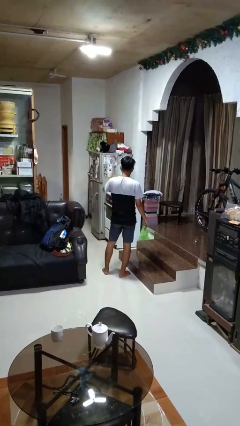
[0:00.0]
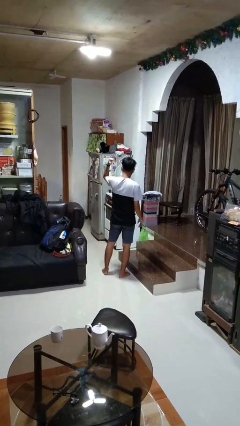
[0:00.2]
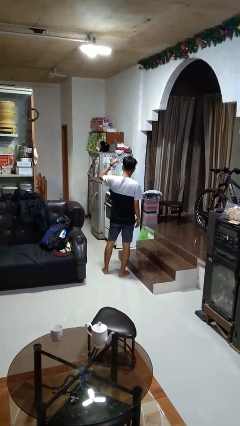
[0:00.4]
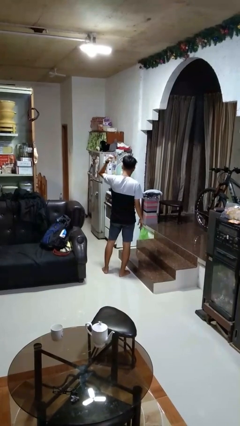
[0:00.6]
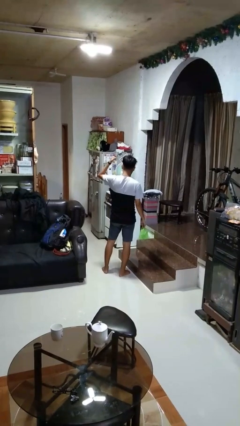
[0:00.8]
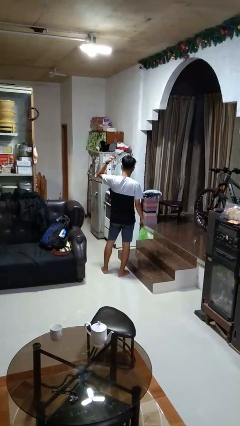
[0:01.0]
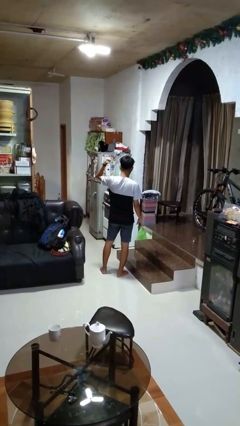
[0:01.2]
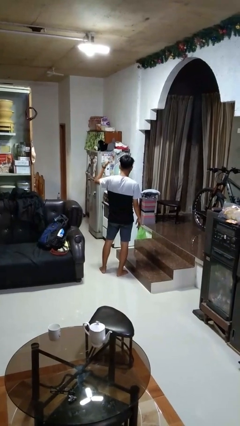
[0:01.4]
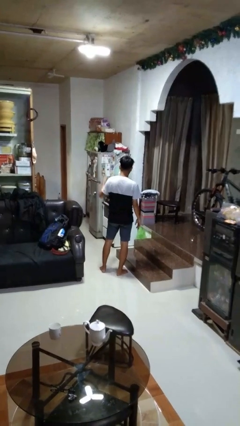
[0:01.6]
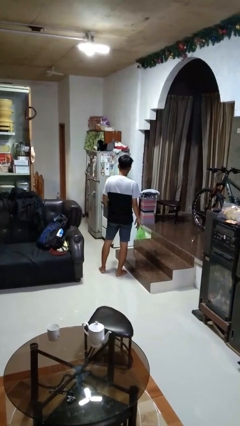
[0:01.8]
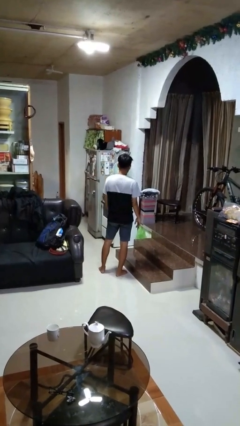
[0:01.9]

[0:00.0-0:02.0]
person gestures behind me

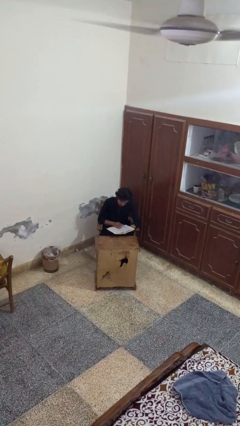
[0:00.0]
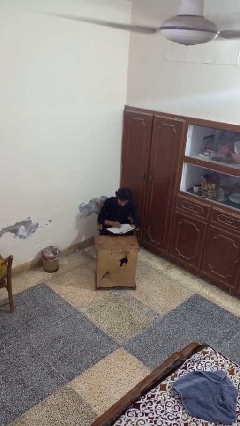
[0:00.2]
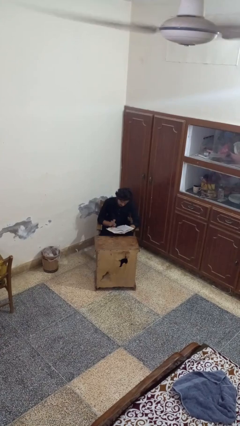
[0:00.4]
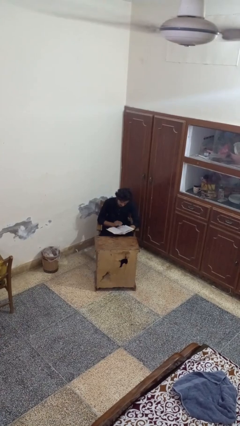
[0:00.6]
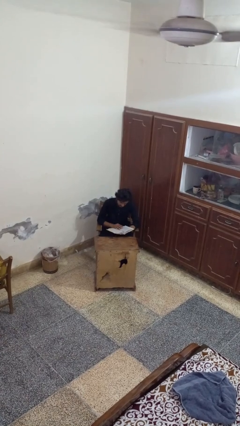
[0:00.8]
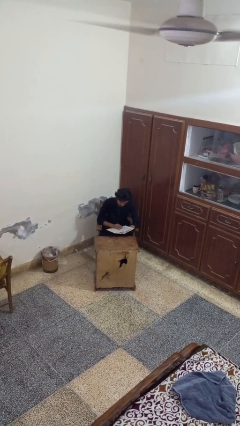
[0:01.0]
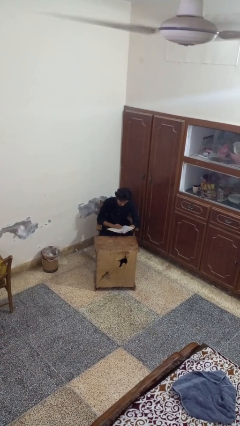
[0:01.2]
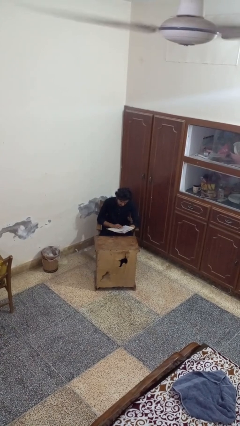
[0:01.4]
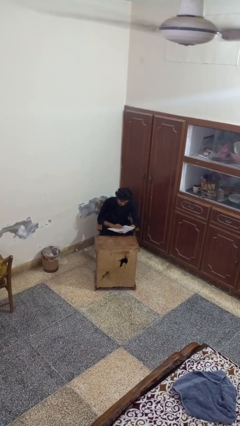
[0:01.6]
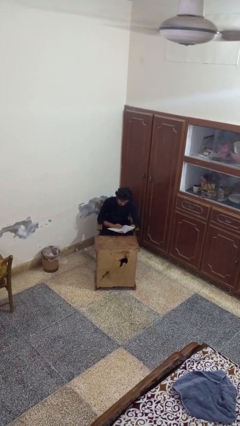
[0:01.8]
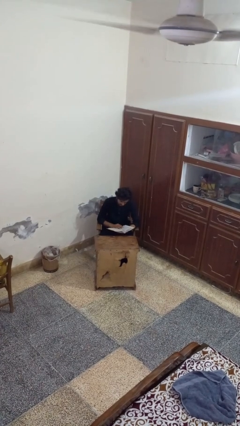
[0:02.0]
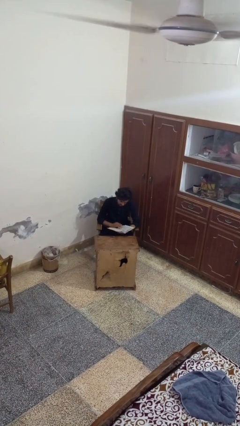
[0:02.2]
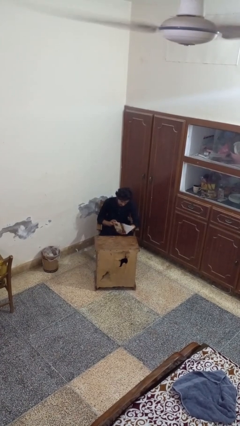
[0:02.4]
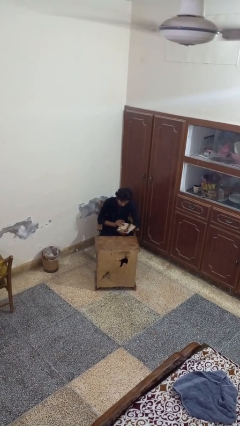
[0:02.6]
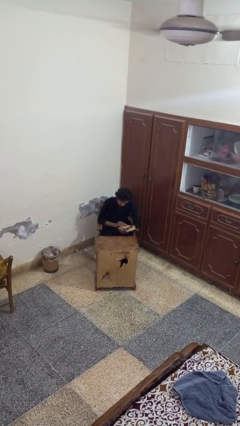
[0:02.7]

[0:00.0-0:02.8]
person reads book

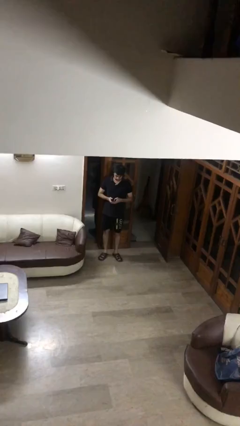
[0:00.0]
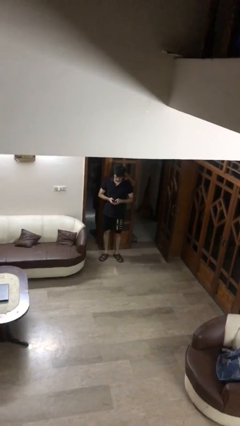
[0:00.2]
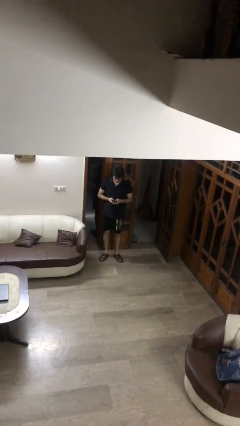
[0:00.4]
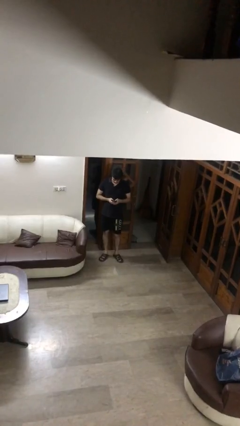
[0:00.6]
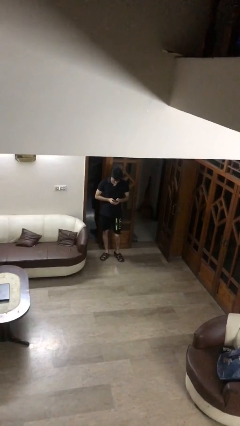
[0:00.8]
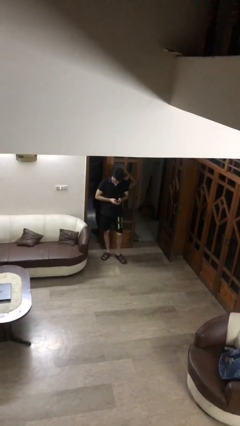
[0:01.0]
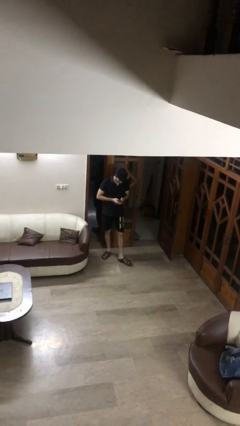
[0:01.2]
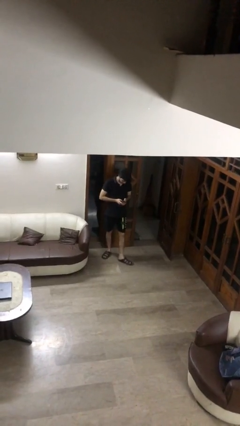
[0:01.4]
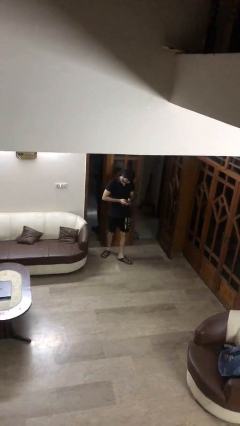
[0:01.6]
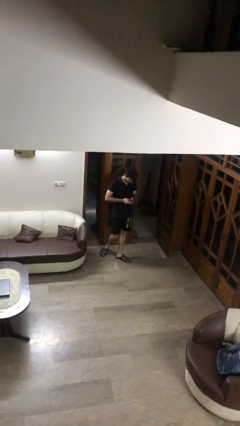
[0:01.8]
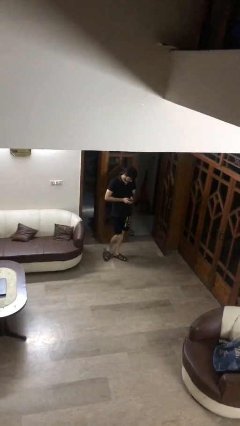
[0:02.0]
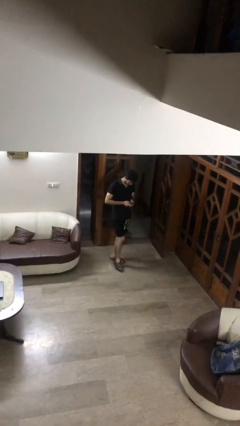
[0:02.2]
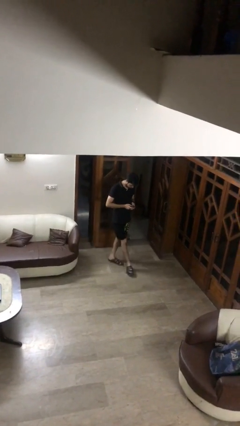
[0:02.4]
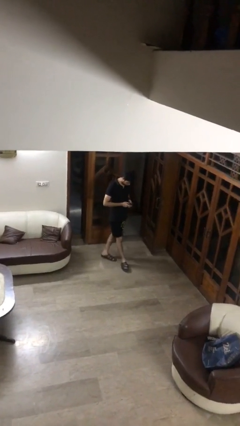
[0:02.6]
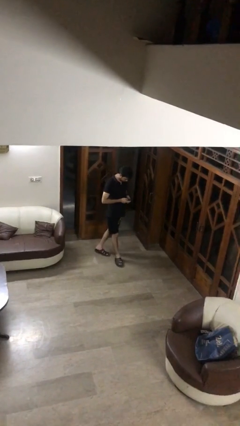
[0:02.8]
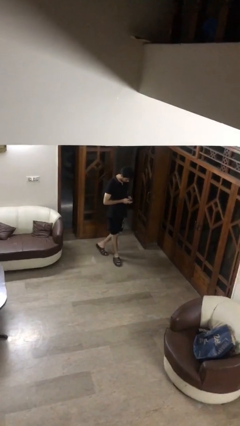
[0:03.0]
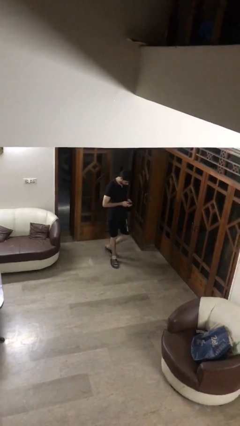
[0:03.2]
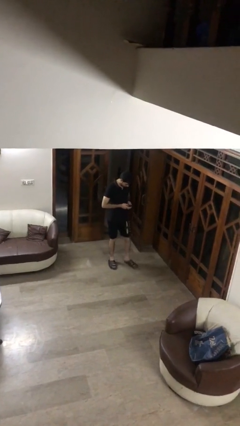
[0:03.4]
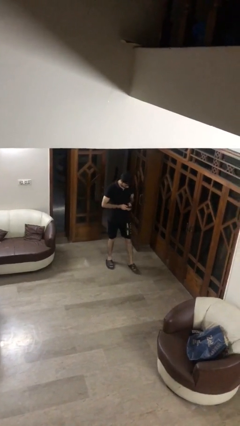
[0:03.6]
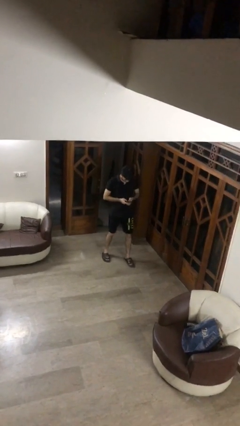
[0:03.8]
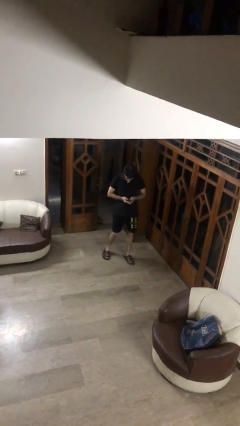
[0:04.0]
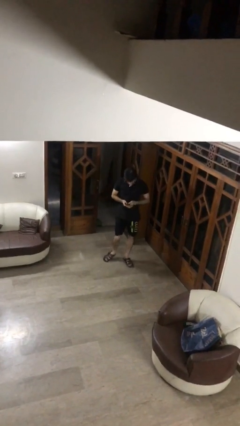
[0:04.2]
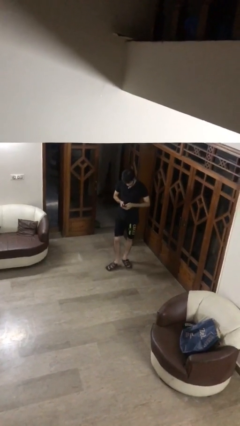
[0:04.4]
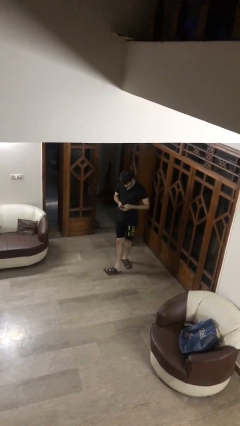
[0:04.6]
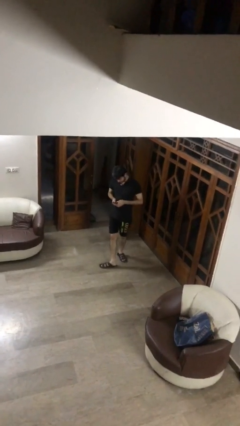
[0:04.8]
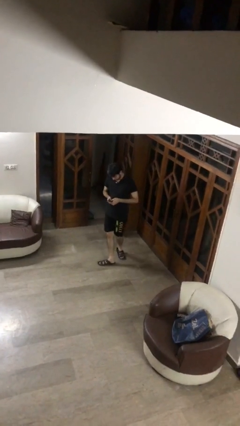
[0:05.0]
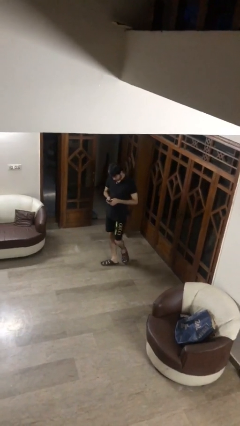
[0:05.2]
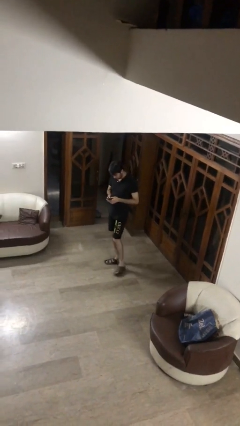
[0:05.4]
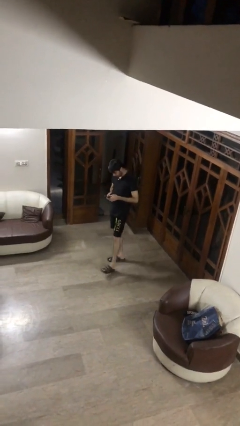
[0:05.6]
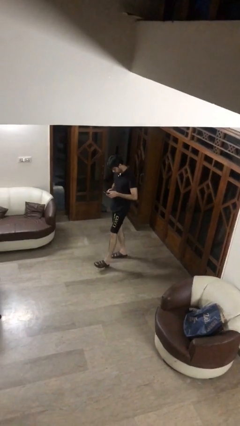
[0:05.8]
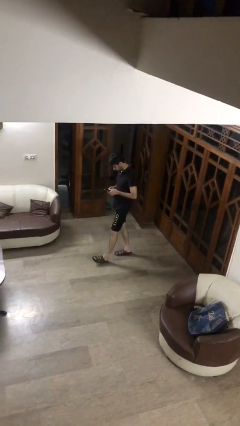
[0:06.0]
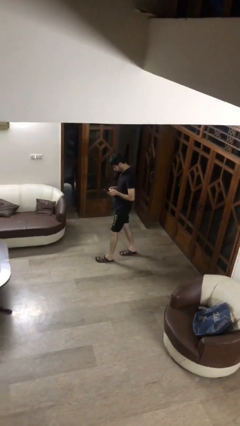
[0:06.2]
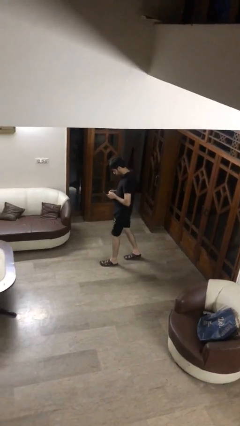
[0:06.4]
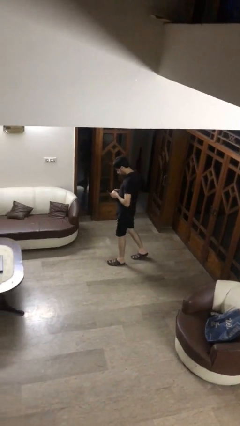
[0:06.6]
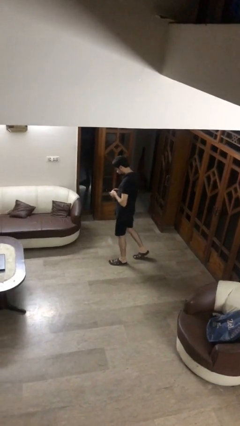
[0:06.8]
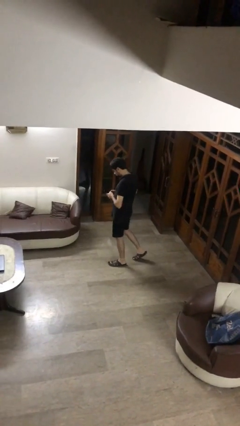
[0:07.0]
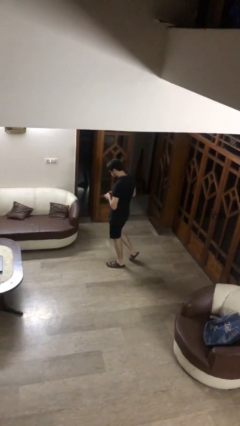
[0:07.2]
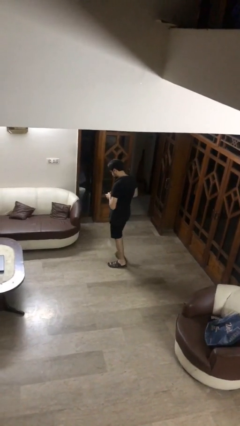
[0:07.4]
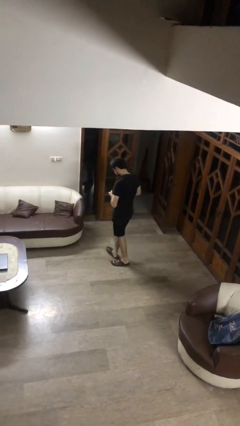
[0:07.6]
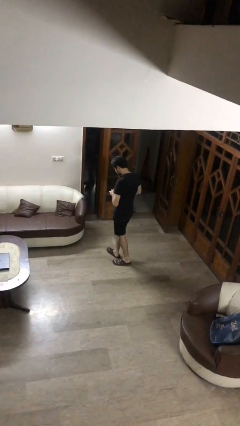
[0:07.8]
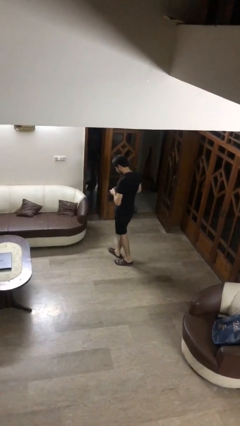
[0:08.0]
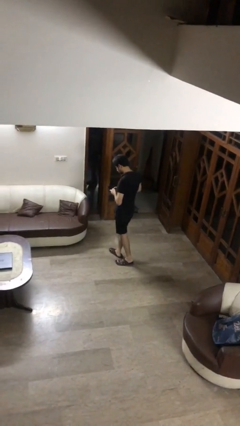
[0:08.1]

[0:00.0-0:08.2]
person texts on phone

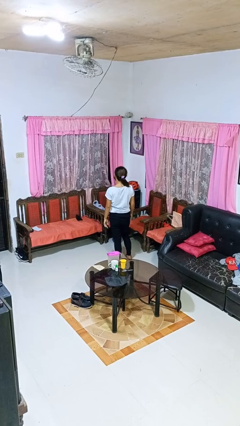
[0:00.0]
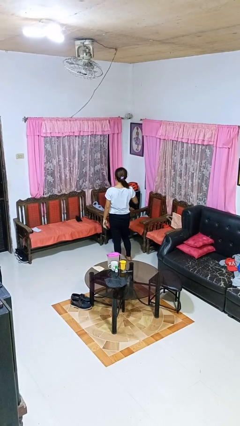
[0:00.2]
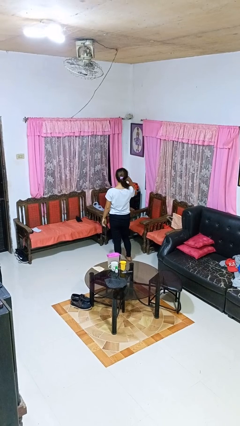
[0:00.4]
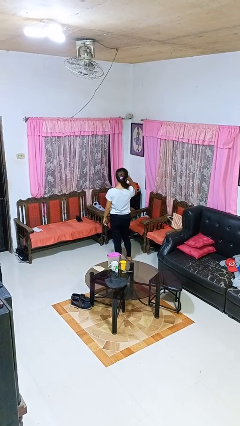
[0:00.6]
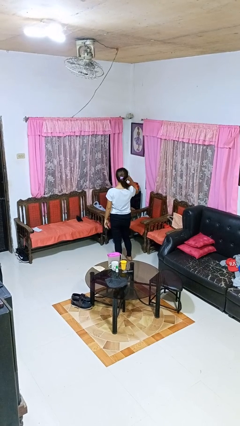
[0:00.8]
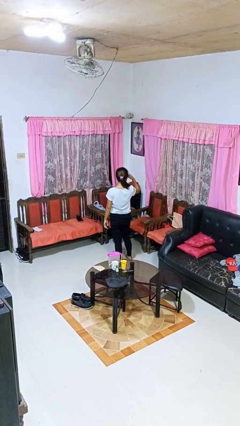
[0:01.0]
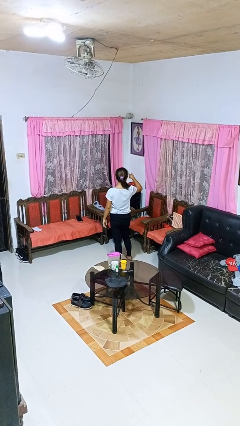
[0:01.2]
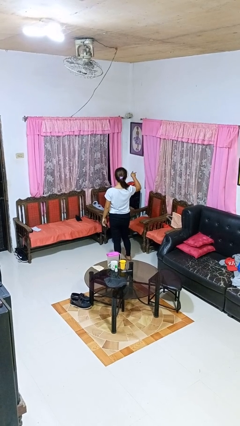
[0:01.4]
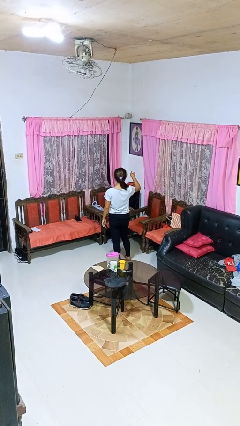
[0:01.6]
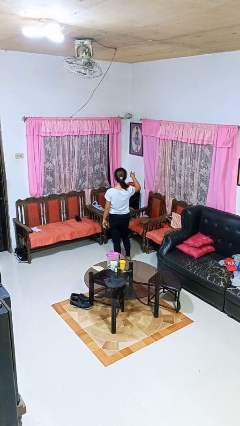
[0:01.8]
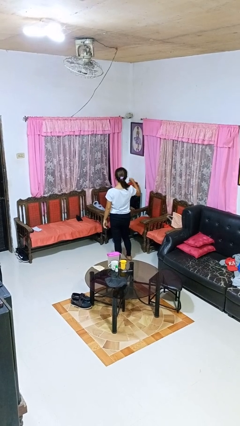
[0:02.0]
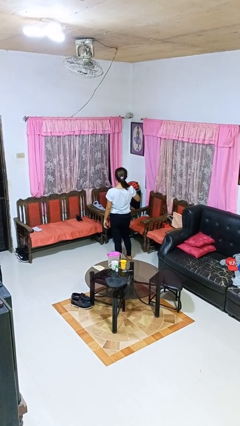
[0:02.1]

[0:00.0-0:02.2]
person gestures watch closely

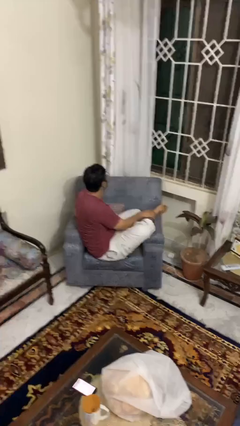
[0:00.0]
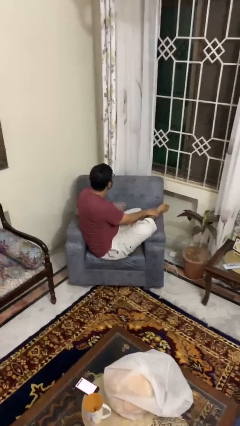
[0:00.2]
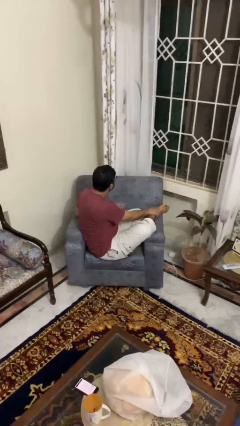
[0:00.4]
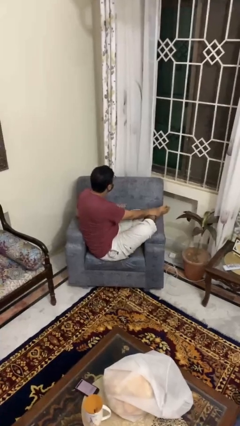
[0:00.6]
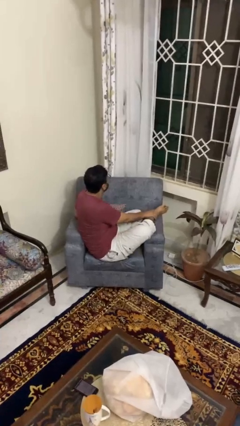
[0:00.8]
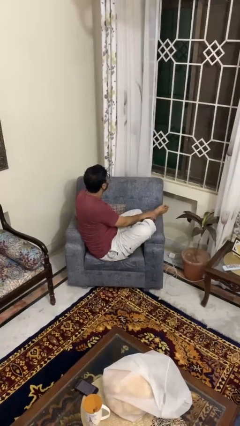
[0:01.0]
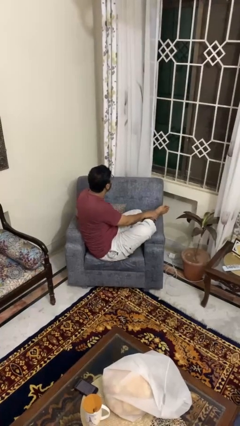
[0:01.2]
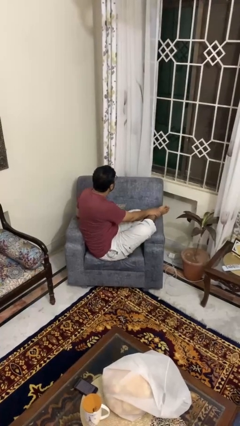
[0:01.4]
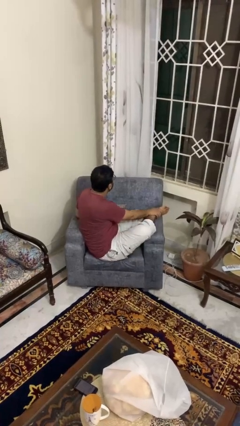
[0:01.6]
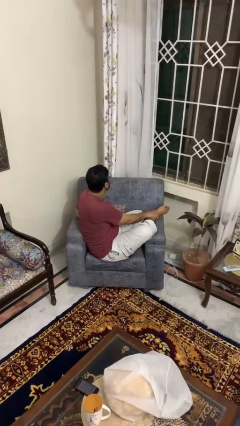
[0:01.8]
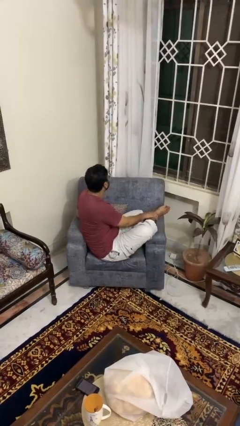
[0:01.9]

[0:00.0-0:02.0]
person rubs foot

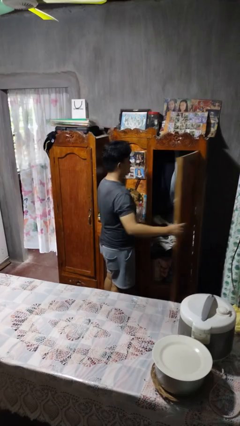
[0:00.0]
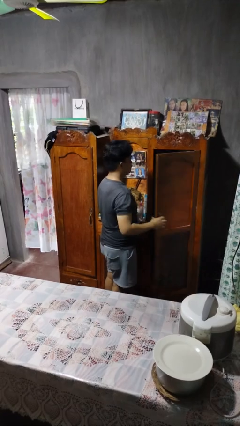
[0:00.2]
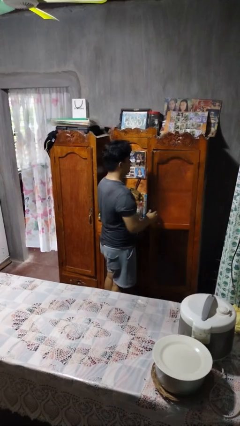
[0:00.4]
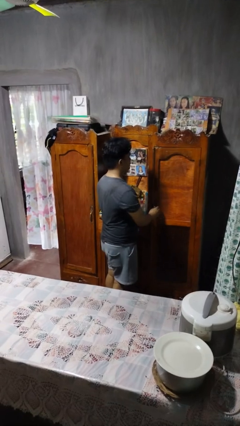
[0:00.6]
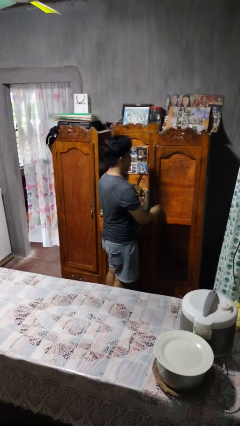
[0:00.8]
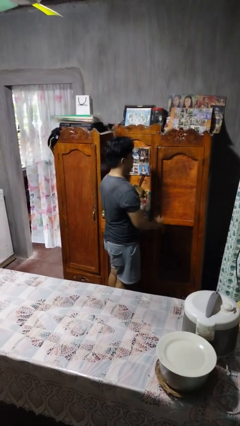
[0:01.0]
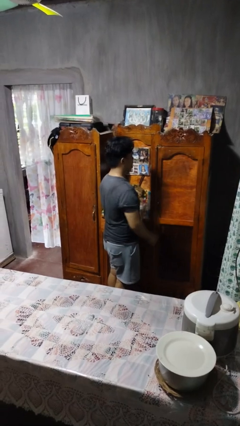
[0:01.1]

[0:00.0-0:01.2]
person closes closet door
